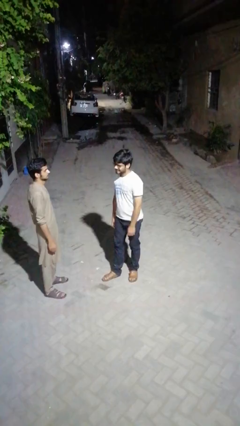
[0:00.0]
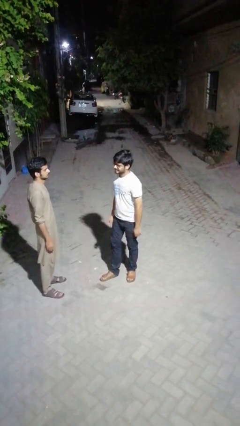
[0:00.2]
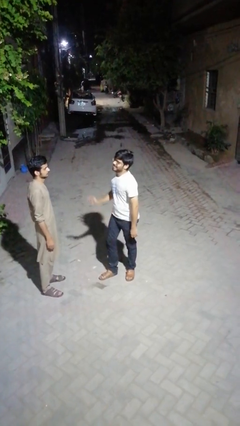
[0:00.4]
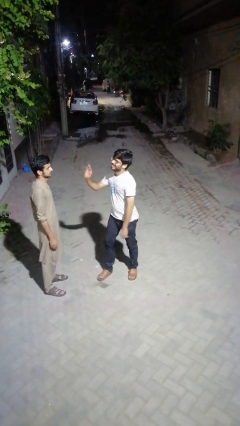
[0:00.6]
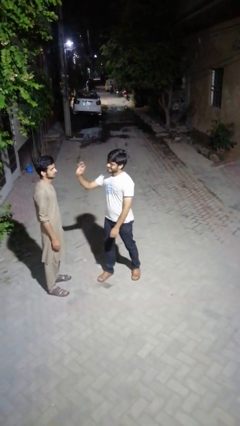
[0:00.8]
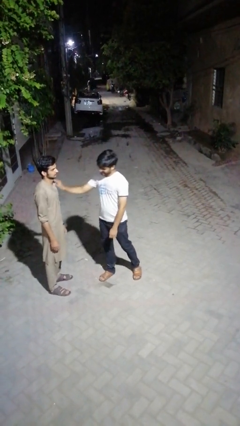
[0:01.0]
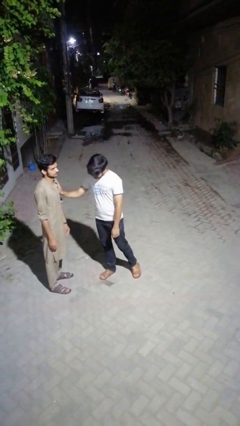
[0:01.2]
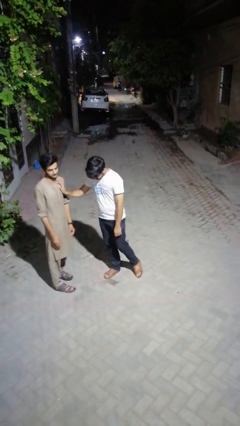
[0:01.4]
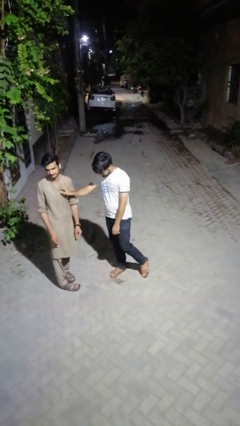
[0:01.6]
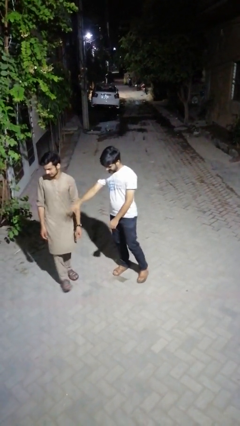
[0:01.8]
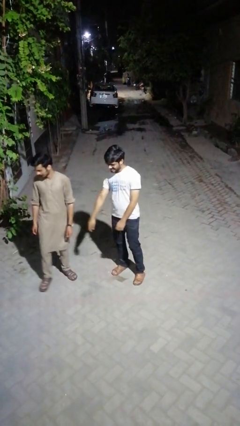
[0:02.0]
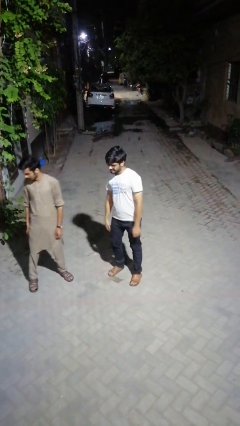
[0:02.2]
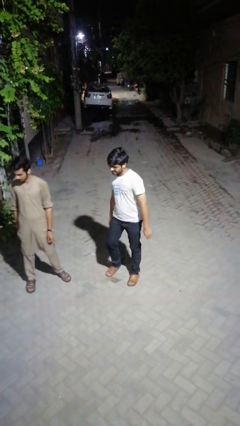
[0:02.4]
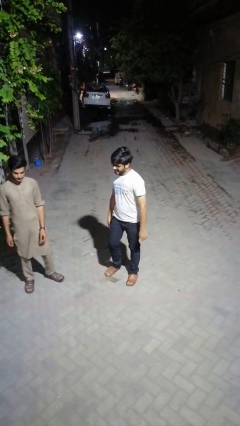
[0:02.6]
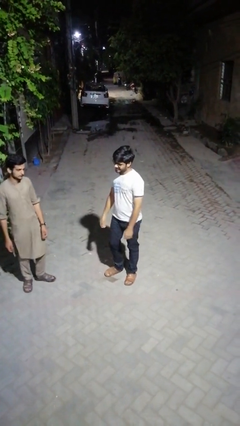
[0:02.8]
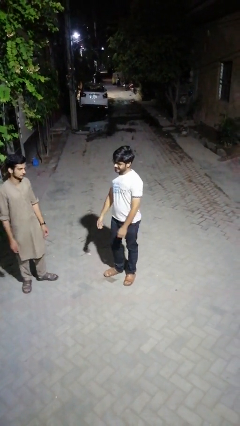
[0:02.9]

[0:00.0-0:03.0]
person shoves person

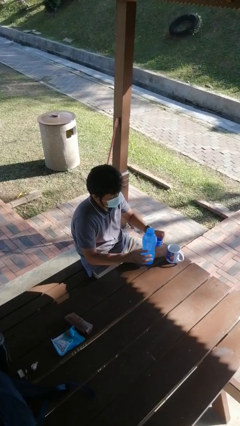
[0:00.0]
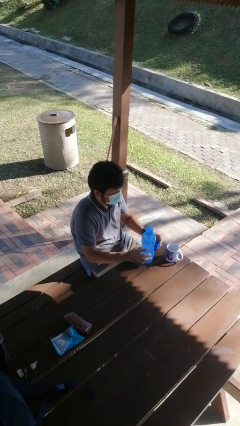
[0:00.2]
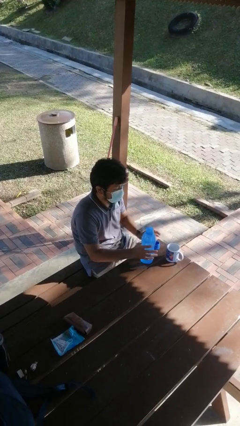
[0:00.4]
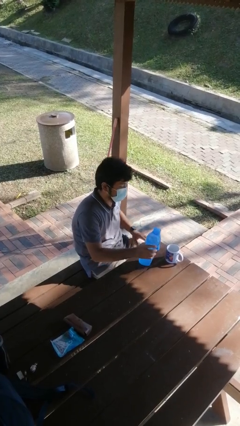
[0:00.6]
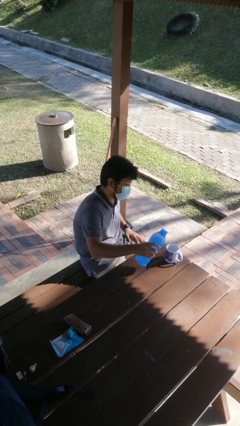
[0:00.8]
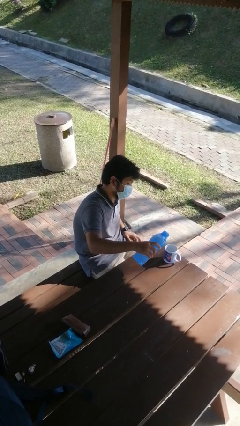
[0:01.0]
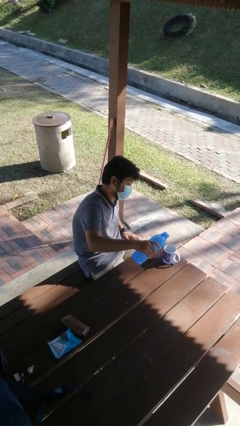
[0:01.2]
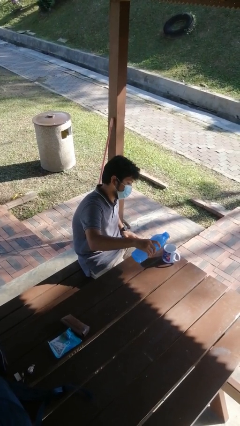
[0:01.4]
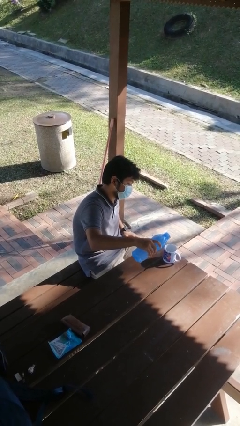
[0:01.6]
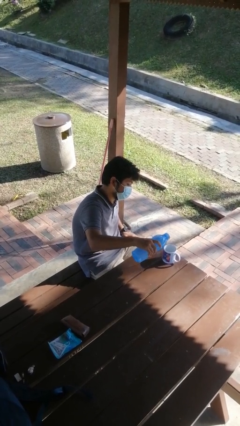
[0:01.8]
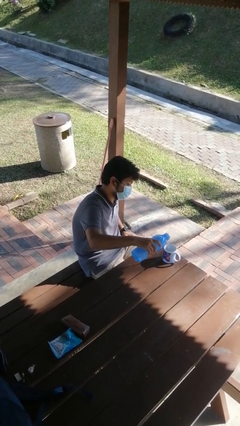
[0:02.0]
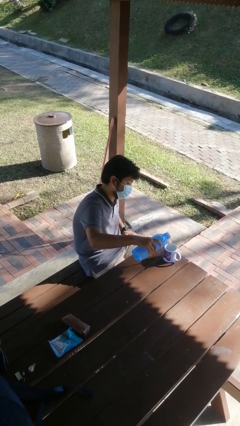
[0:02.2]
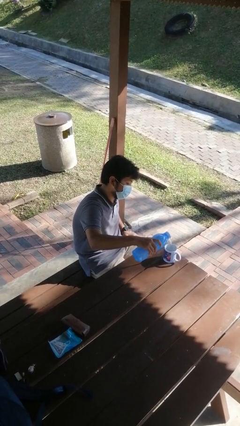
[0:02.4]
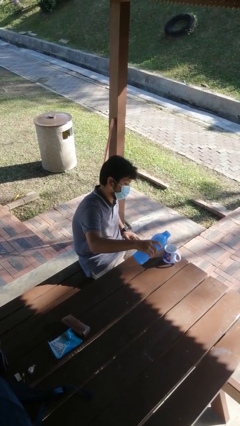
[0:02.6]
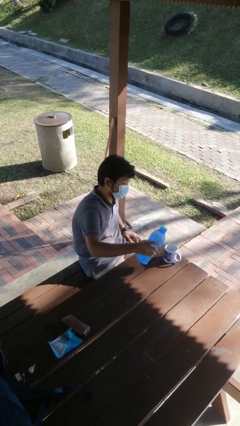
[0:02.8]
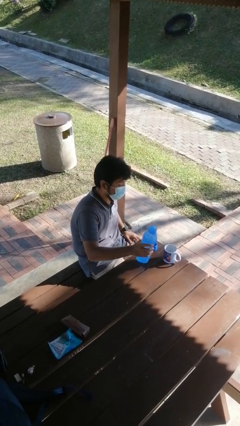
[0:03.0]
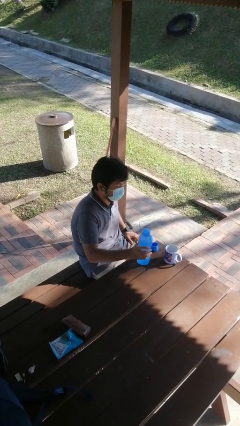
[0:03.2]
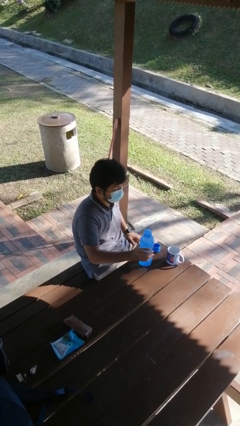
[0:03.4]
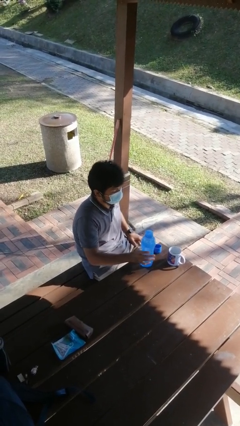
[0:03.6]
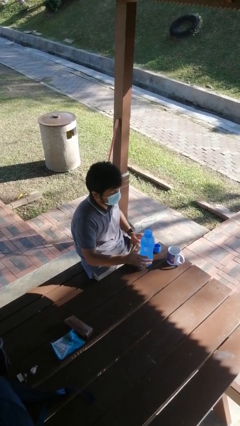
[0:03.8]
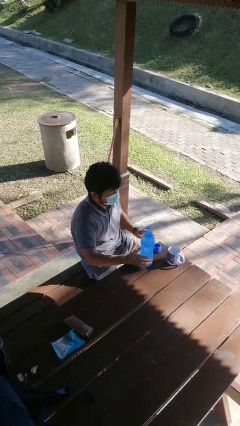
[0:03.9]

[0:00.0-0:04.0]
person pours liquid into cup

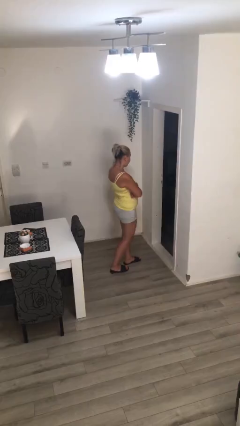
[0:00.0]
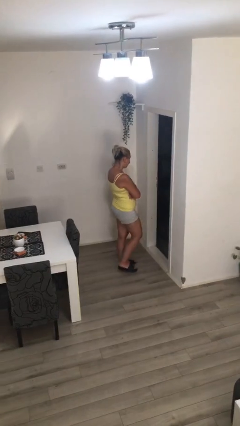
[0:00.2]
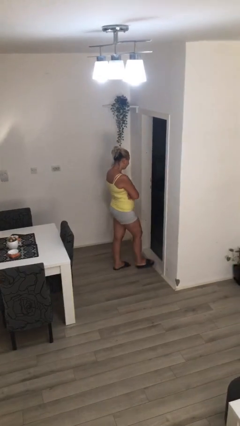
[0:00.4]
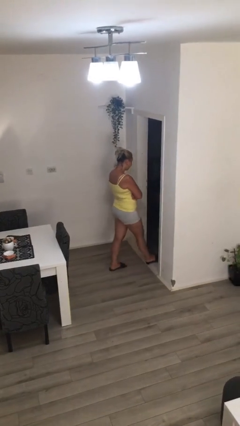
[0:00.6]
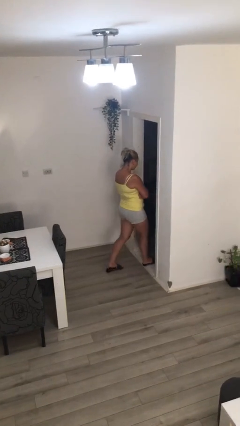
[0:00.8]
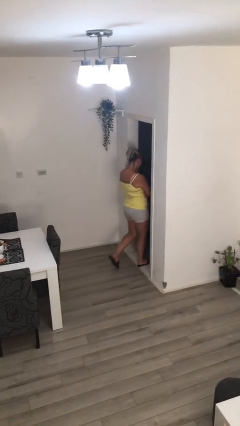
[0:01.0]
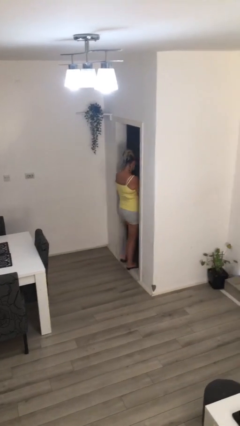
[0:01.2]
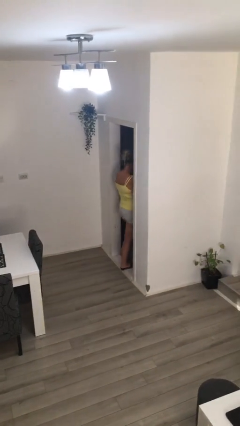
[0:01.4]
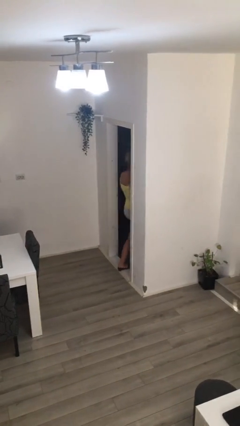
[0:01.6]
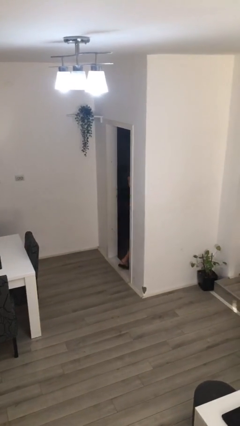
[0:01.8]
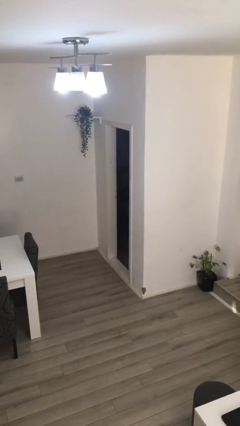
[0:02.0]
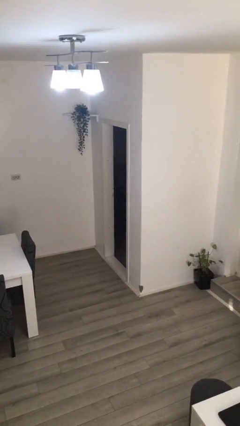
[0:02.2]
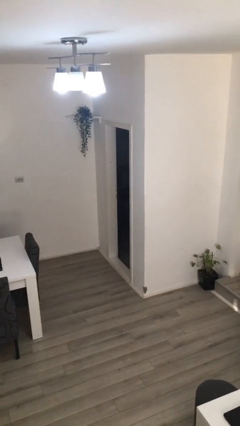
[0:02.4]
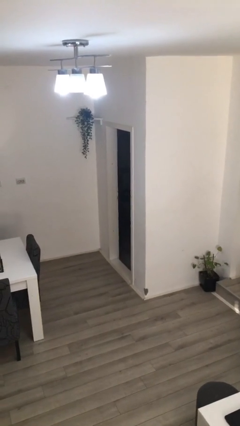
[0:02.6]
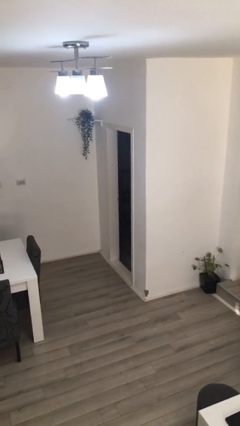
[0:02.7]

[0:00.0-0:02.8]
person exits scene through structure

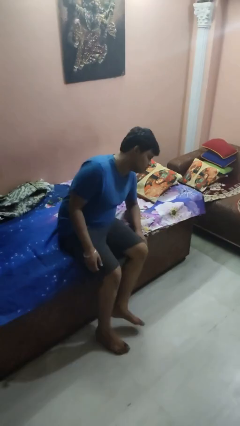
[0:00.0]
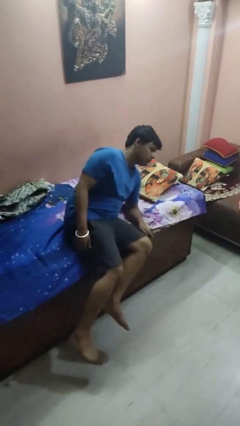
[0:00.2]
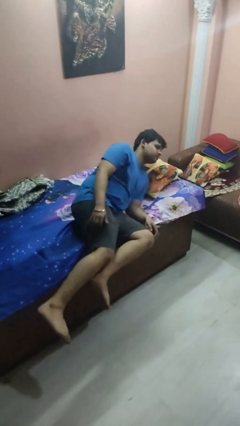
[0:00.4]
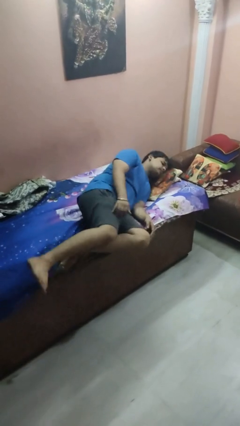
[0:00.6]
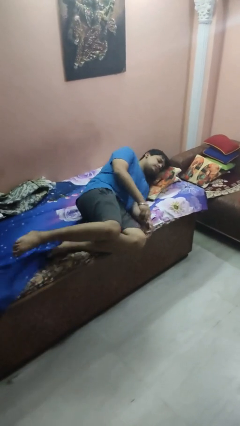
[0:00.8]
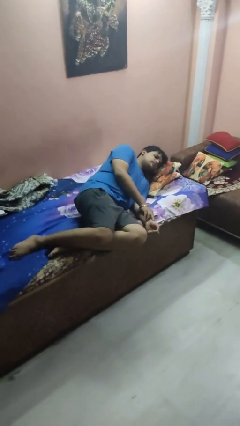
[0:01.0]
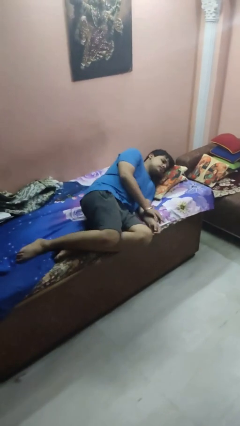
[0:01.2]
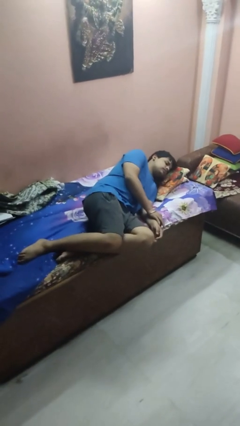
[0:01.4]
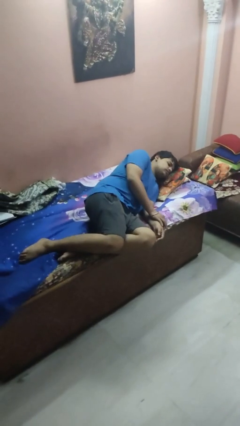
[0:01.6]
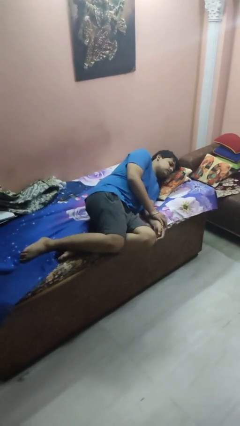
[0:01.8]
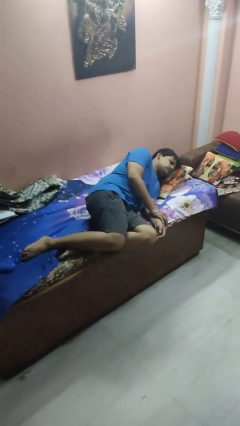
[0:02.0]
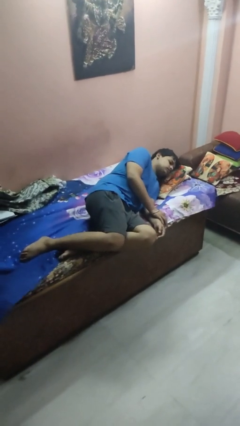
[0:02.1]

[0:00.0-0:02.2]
person lies down on bed

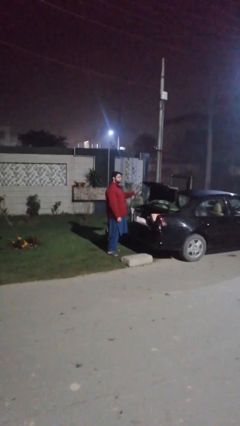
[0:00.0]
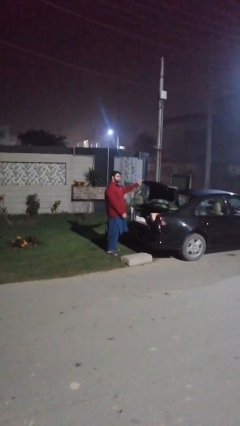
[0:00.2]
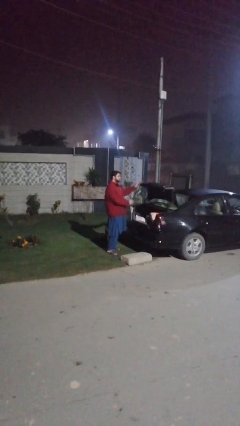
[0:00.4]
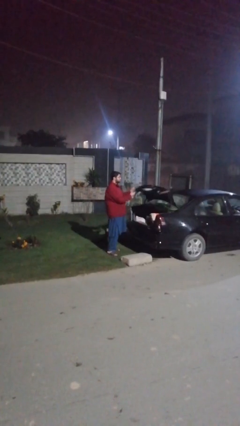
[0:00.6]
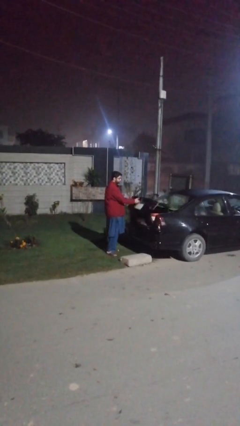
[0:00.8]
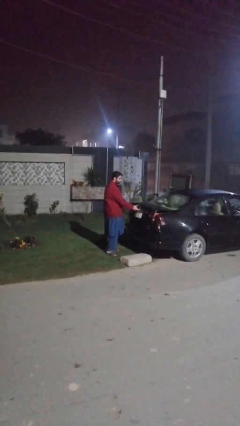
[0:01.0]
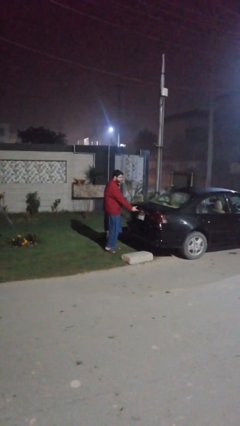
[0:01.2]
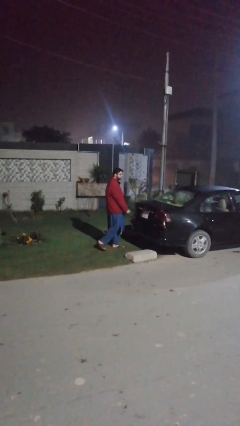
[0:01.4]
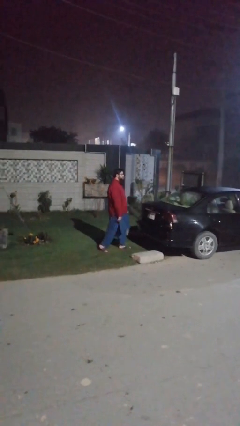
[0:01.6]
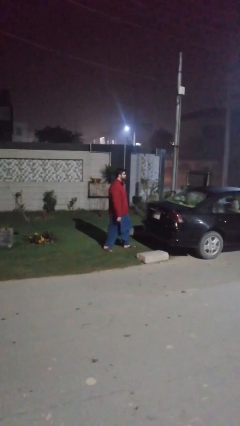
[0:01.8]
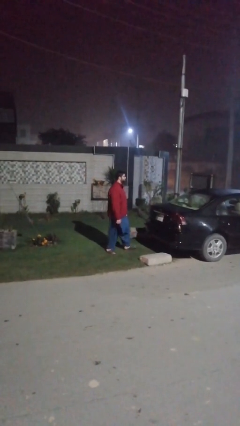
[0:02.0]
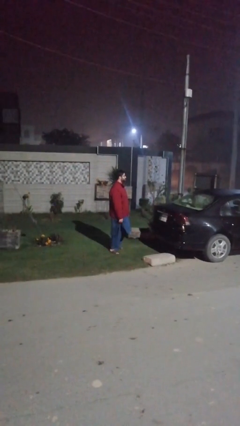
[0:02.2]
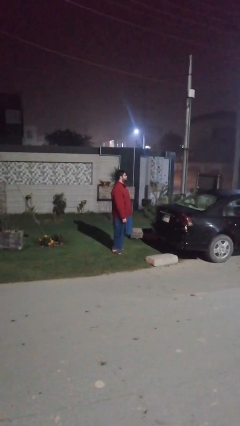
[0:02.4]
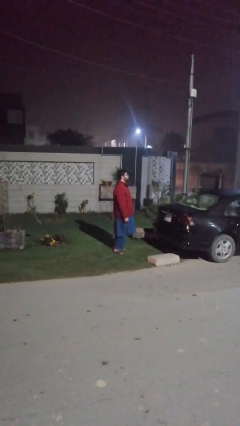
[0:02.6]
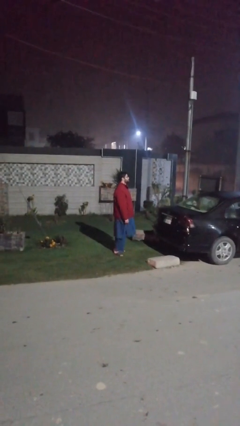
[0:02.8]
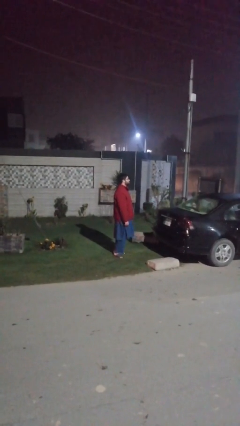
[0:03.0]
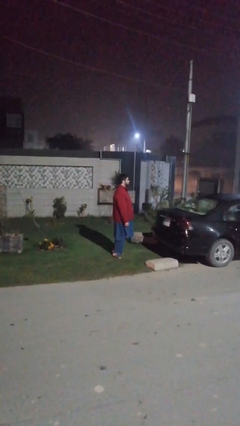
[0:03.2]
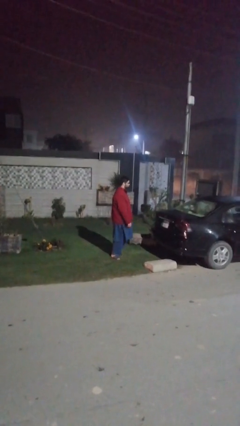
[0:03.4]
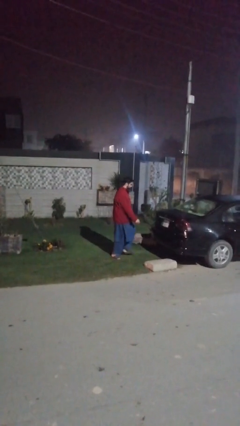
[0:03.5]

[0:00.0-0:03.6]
person closes car trunk

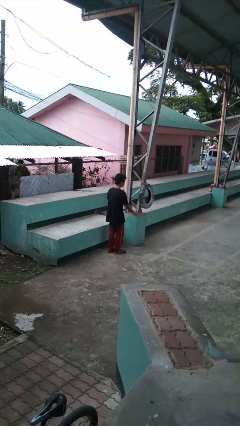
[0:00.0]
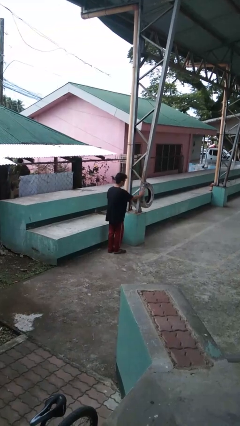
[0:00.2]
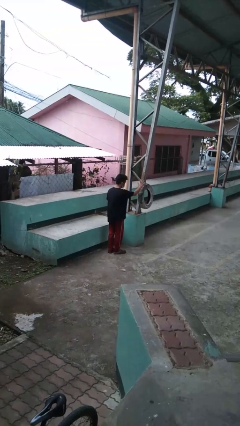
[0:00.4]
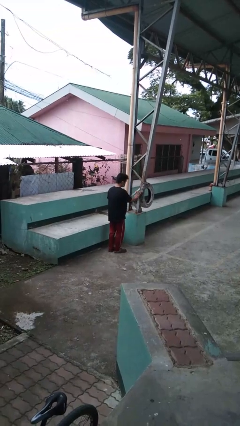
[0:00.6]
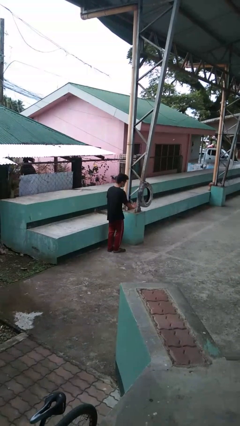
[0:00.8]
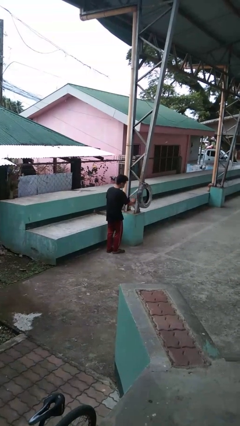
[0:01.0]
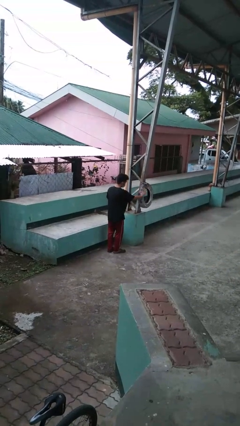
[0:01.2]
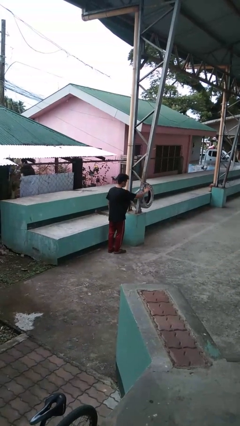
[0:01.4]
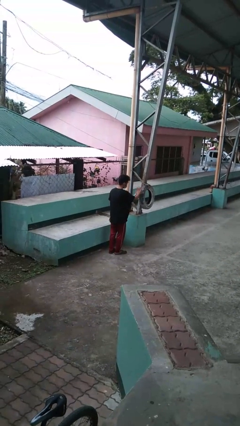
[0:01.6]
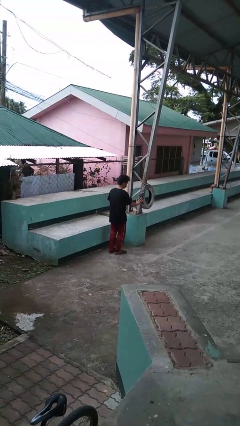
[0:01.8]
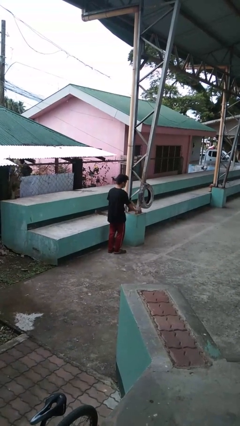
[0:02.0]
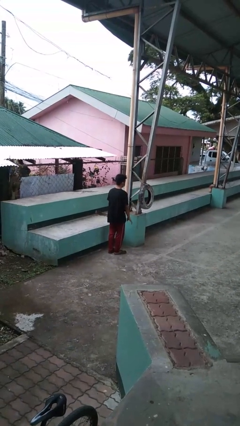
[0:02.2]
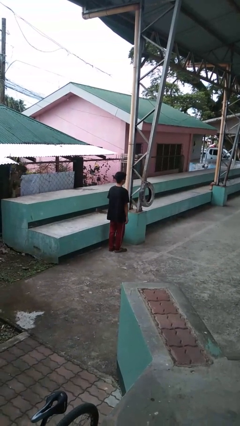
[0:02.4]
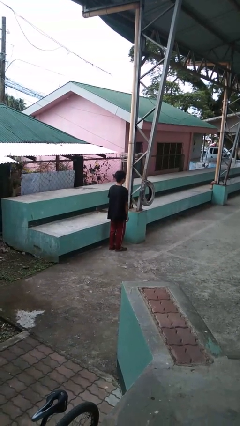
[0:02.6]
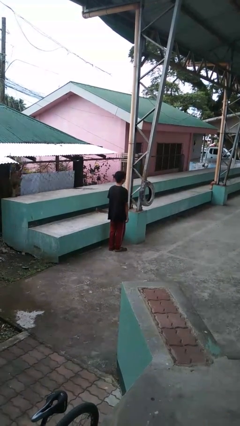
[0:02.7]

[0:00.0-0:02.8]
person waves hand over object
